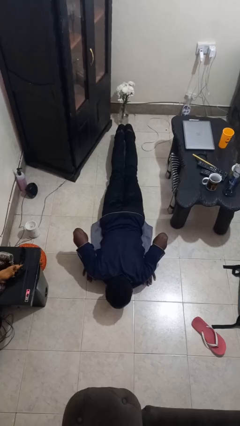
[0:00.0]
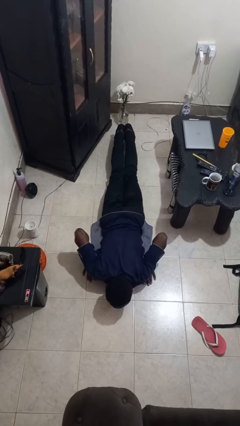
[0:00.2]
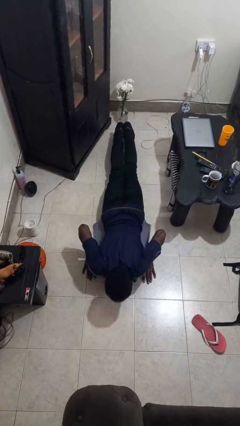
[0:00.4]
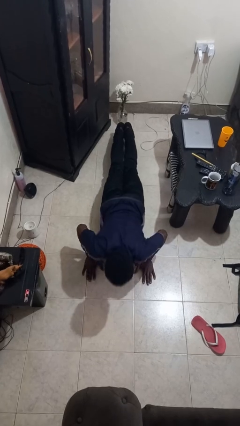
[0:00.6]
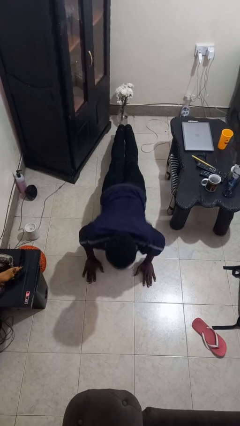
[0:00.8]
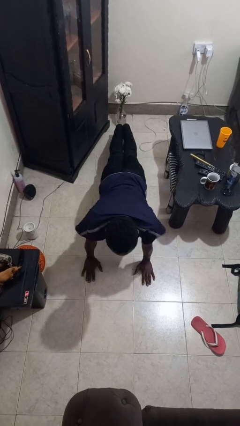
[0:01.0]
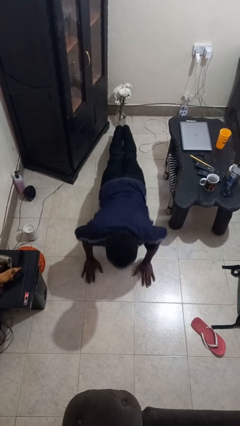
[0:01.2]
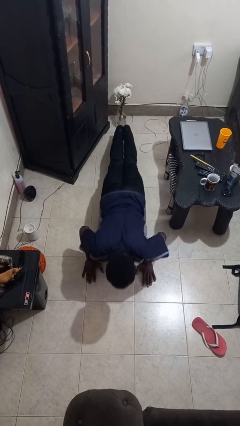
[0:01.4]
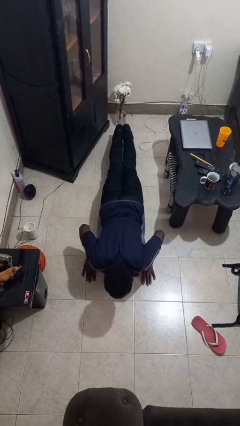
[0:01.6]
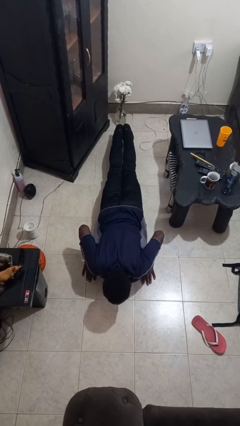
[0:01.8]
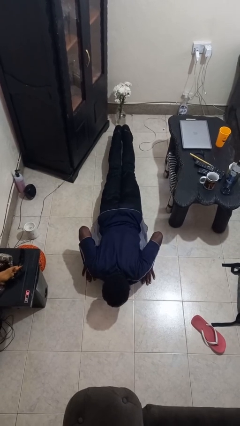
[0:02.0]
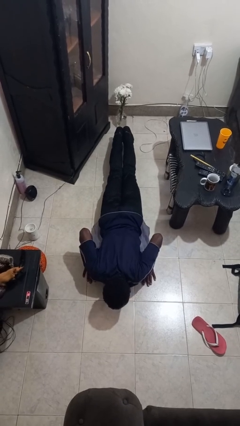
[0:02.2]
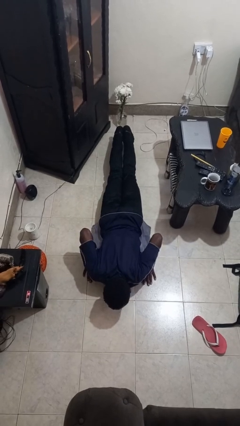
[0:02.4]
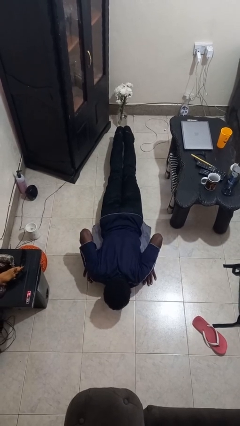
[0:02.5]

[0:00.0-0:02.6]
person exercises with pushup

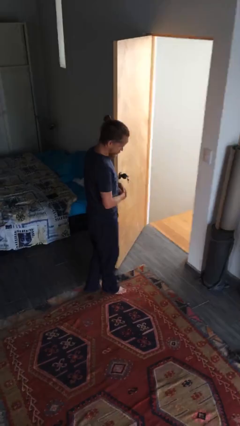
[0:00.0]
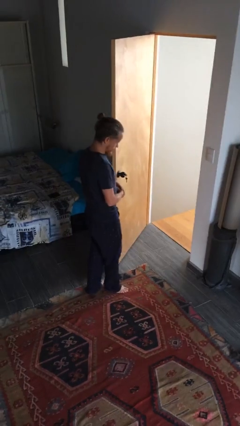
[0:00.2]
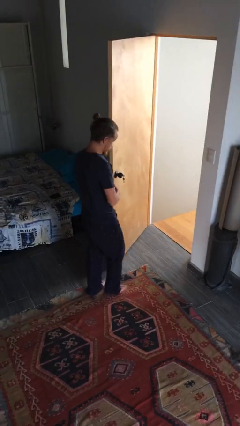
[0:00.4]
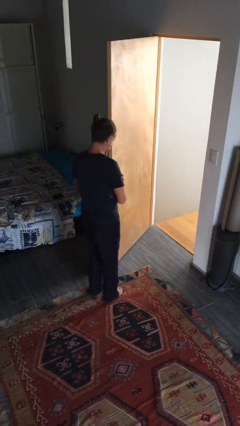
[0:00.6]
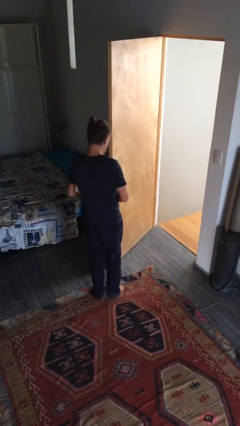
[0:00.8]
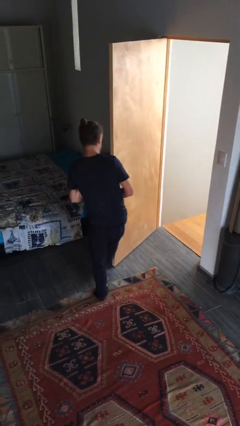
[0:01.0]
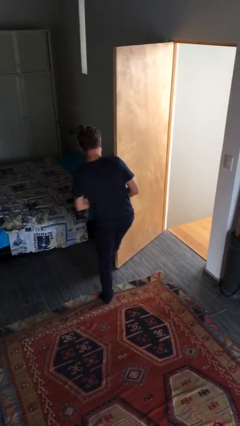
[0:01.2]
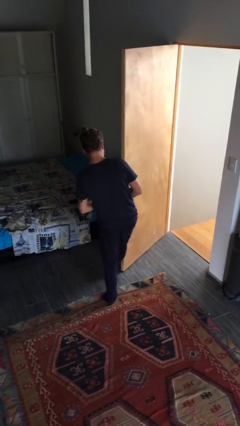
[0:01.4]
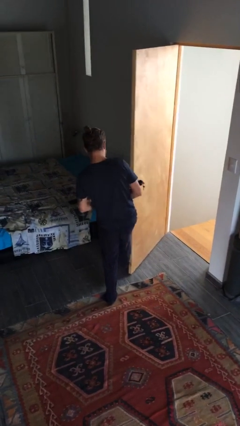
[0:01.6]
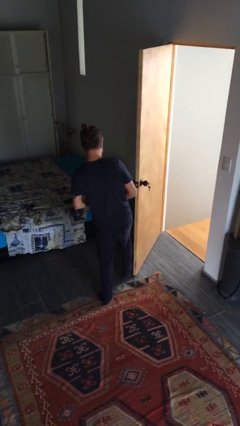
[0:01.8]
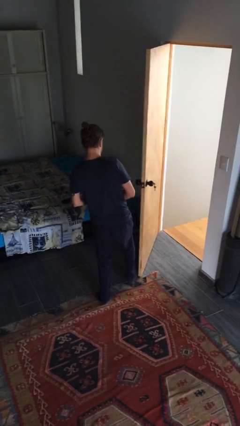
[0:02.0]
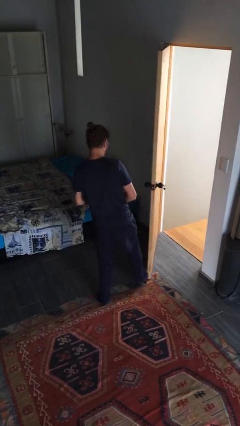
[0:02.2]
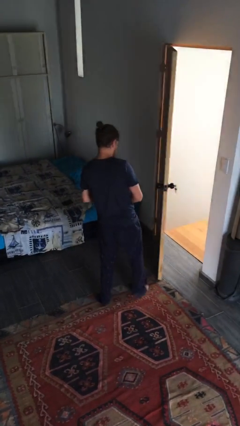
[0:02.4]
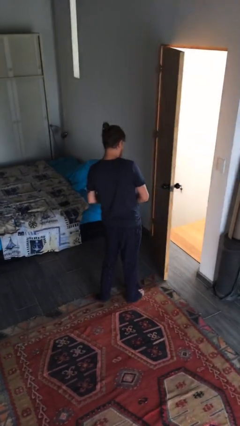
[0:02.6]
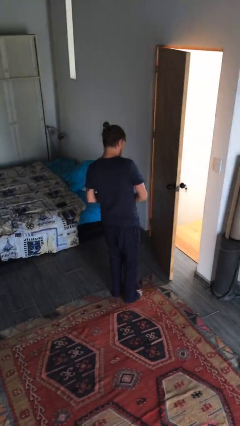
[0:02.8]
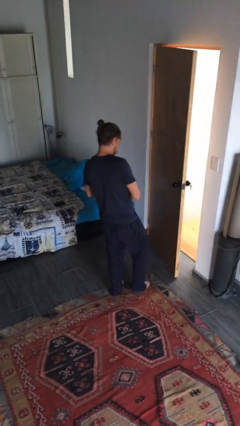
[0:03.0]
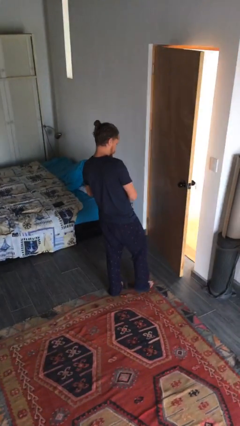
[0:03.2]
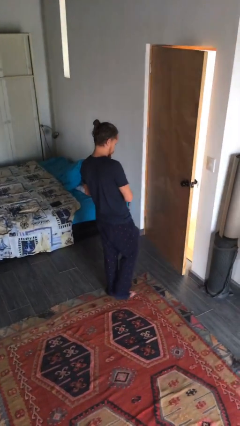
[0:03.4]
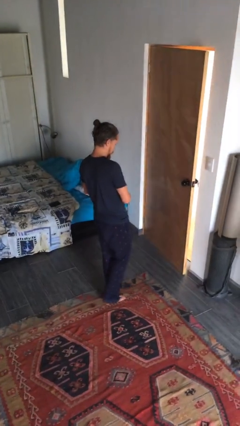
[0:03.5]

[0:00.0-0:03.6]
person closes door with foot

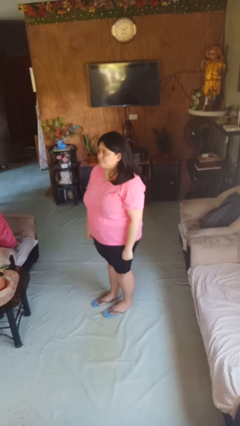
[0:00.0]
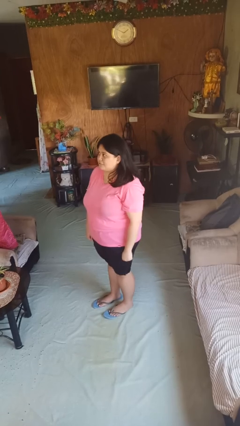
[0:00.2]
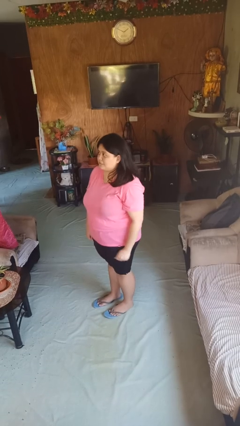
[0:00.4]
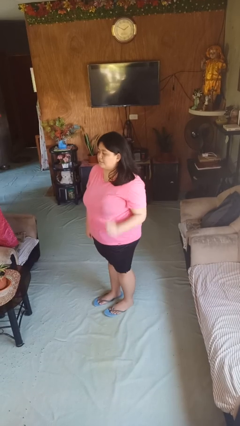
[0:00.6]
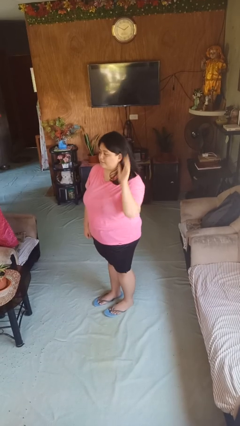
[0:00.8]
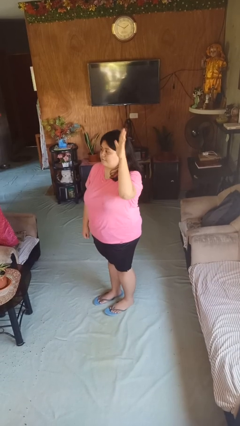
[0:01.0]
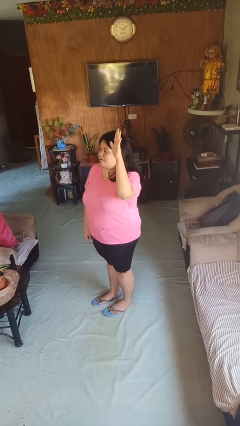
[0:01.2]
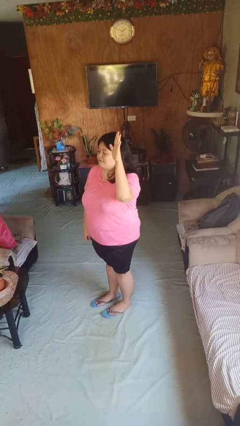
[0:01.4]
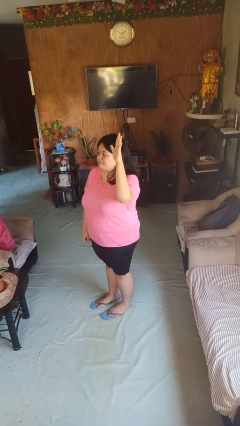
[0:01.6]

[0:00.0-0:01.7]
person gestures raise hand

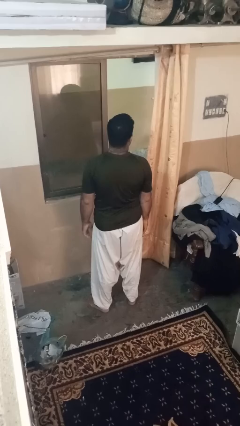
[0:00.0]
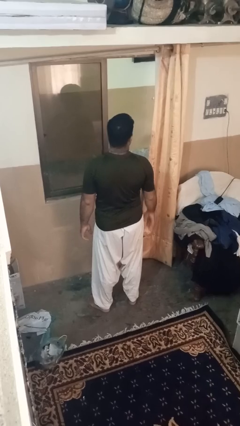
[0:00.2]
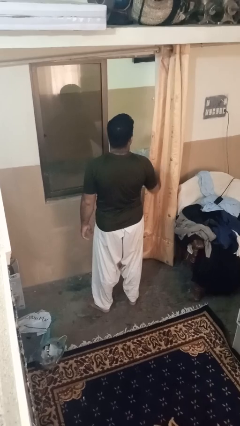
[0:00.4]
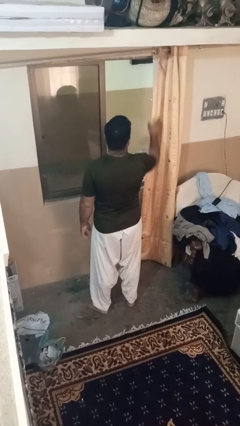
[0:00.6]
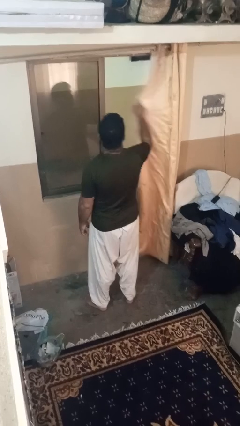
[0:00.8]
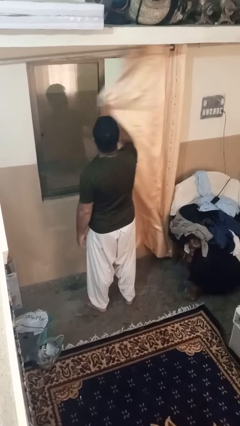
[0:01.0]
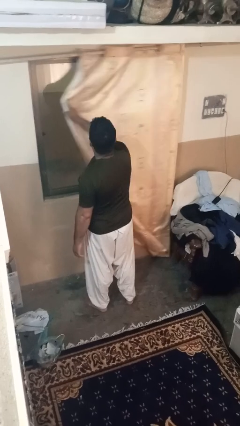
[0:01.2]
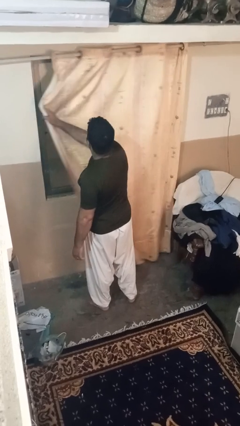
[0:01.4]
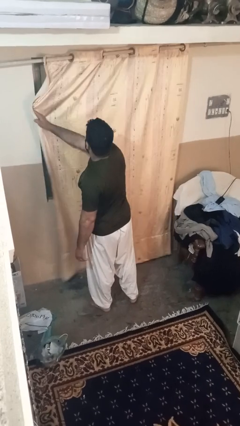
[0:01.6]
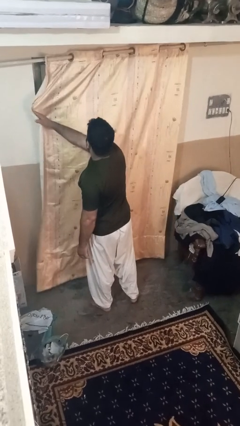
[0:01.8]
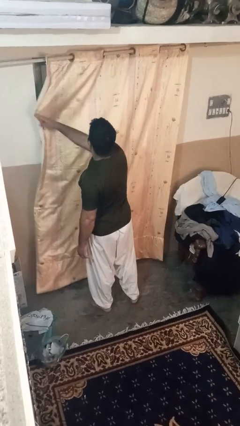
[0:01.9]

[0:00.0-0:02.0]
person closes curtains

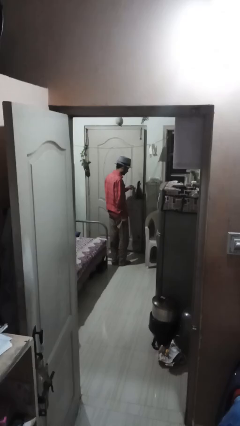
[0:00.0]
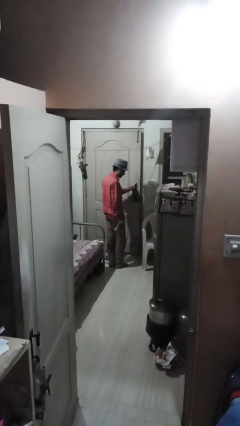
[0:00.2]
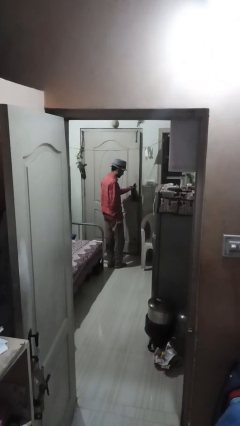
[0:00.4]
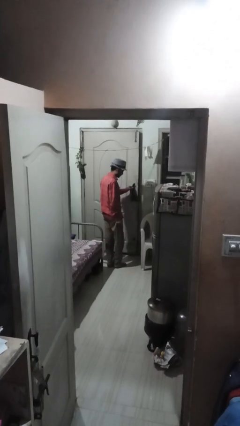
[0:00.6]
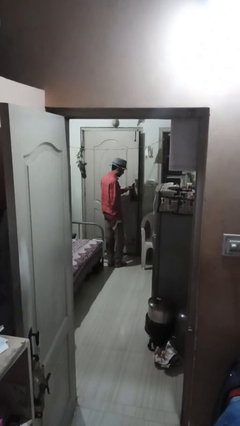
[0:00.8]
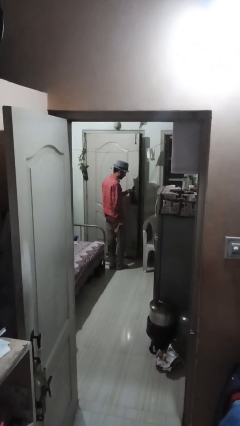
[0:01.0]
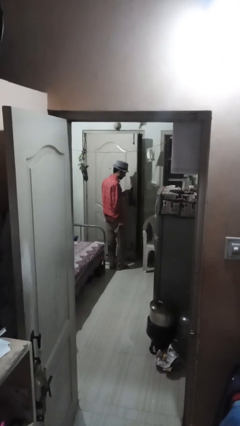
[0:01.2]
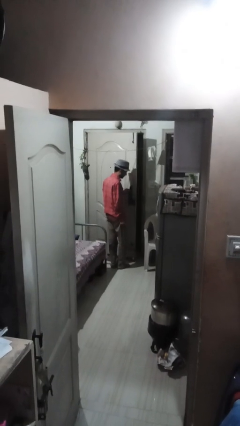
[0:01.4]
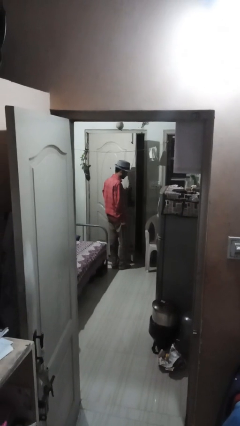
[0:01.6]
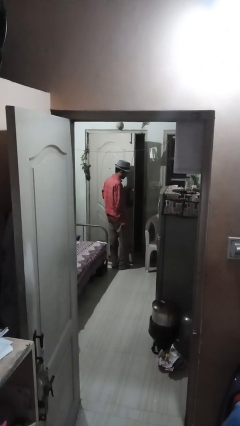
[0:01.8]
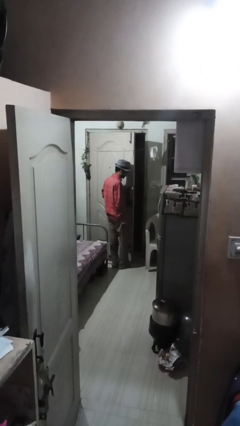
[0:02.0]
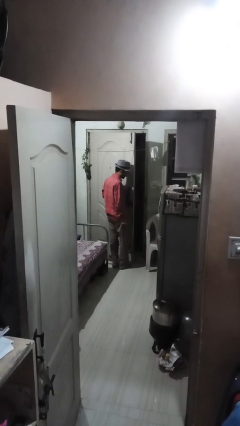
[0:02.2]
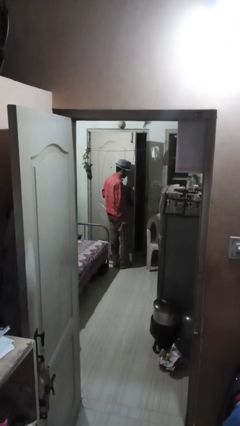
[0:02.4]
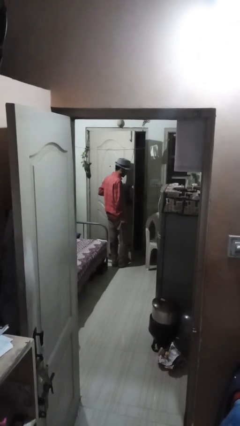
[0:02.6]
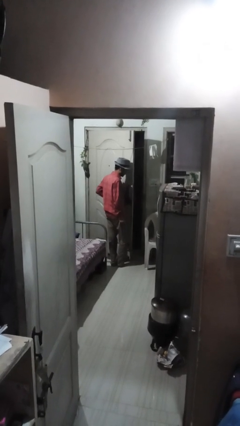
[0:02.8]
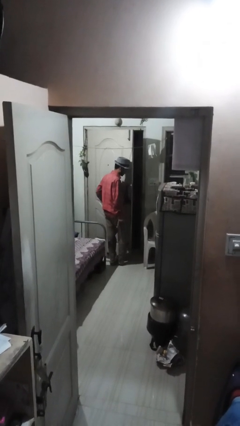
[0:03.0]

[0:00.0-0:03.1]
person opens facility door

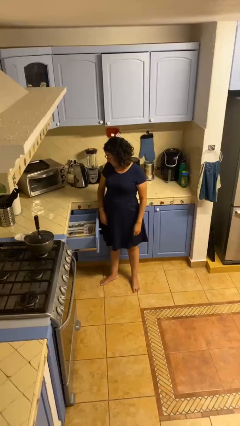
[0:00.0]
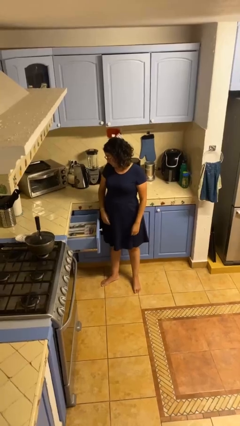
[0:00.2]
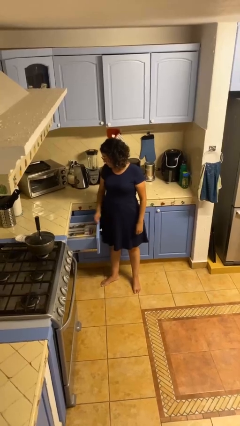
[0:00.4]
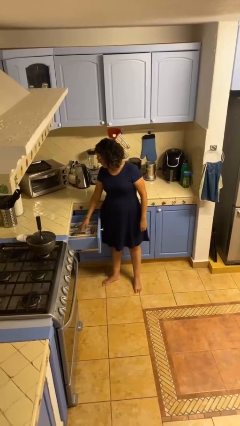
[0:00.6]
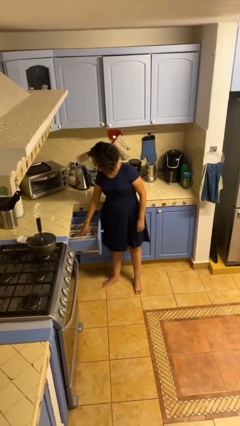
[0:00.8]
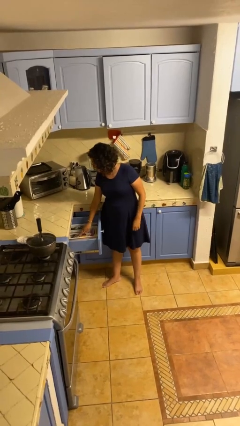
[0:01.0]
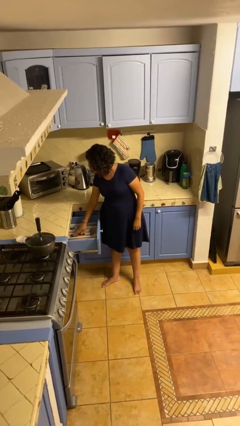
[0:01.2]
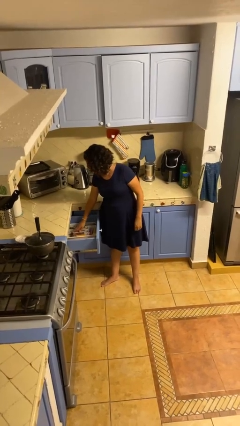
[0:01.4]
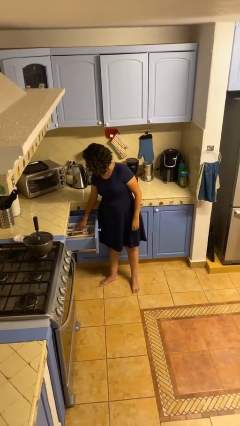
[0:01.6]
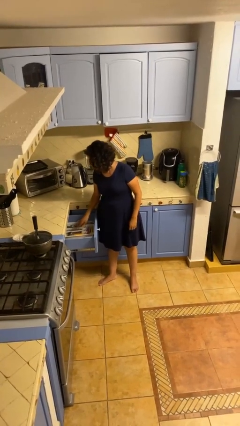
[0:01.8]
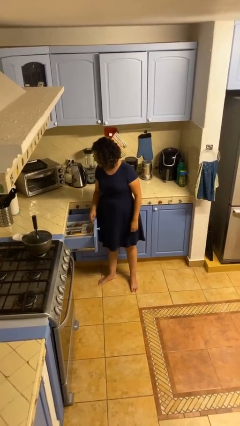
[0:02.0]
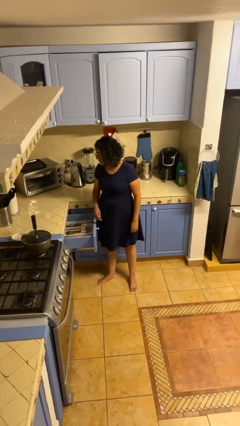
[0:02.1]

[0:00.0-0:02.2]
person searches in kitchen drawer

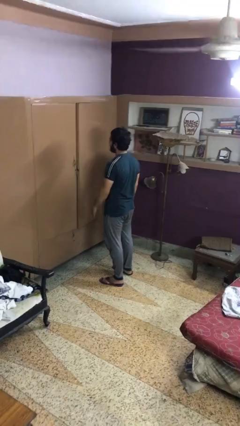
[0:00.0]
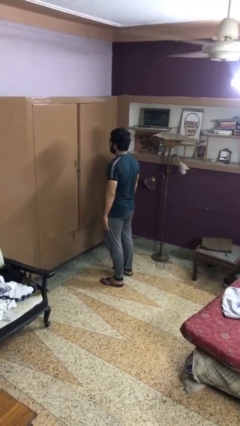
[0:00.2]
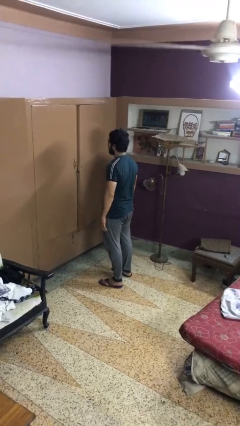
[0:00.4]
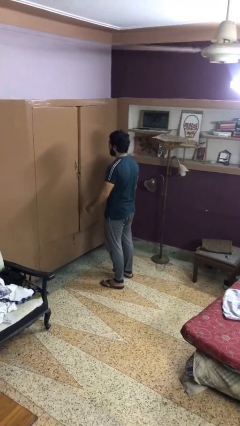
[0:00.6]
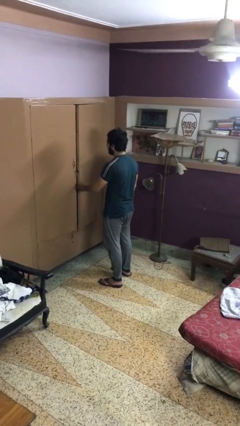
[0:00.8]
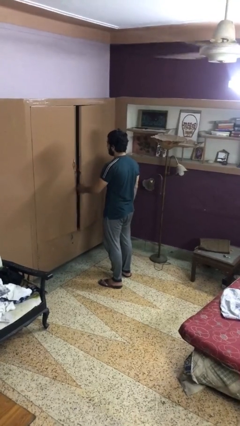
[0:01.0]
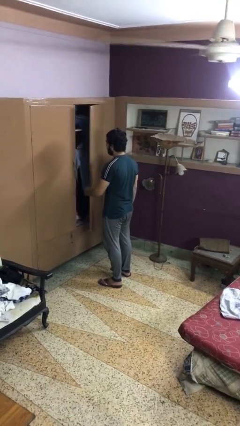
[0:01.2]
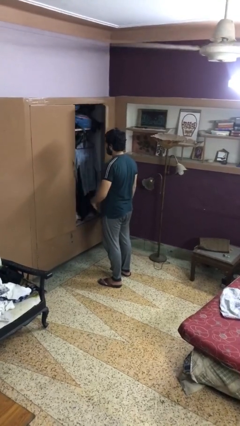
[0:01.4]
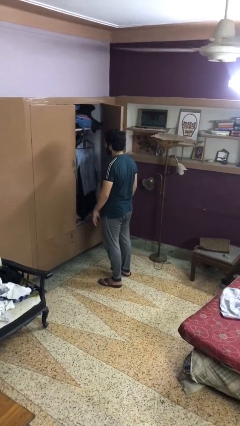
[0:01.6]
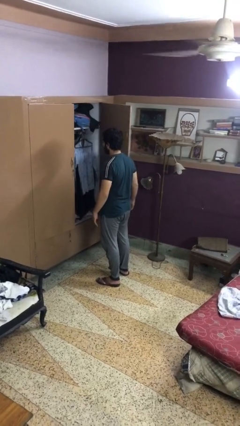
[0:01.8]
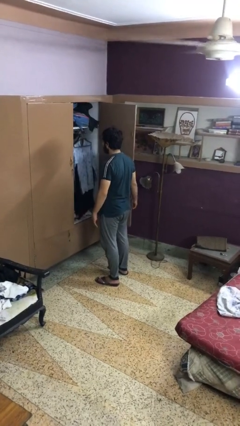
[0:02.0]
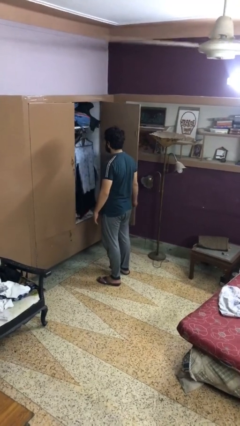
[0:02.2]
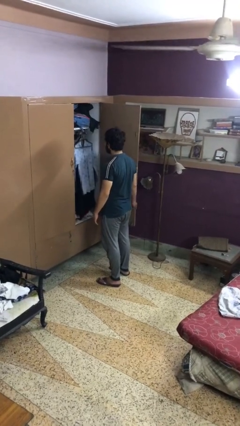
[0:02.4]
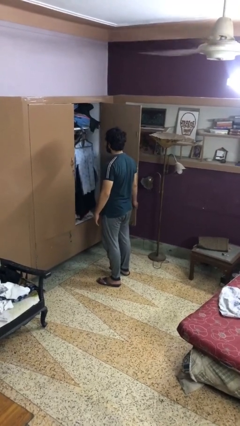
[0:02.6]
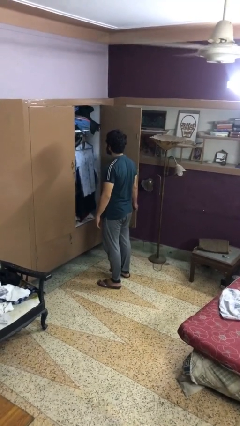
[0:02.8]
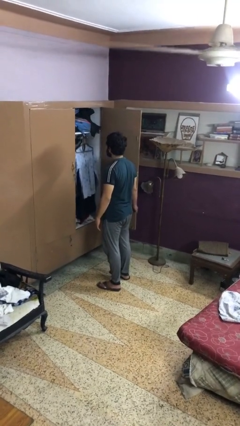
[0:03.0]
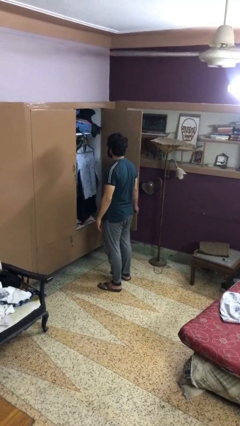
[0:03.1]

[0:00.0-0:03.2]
person opens closet door
